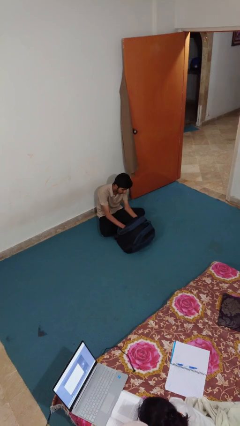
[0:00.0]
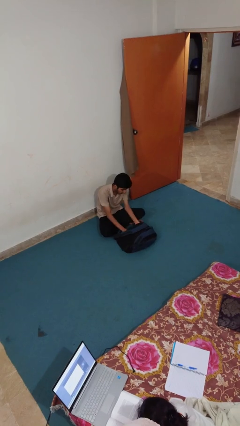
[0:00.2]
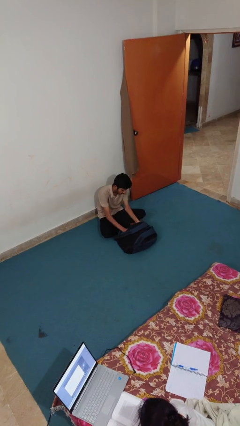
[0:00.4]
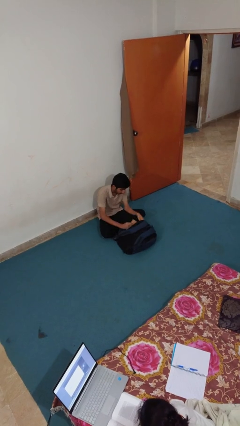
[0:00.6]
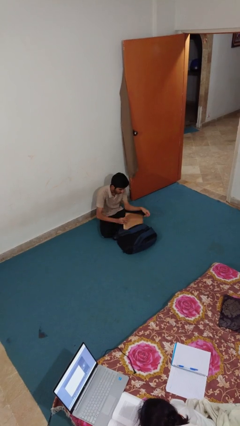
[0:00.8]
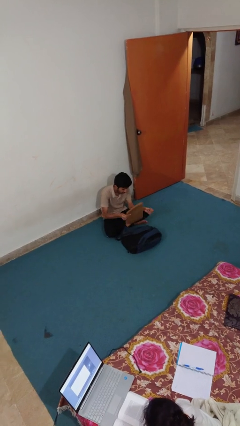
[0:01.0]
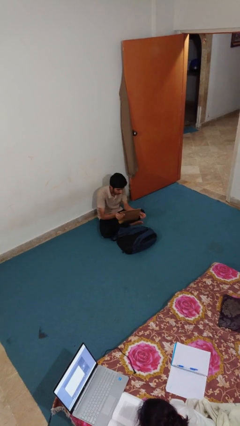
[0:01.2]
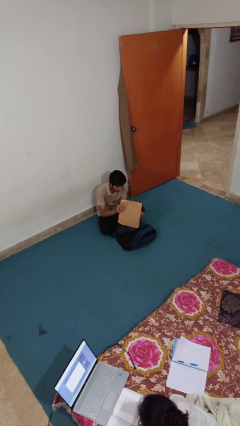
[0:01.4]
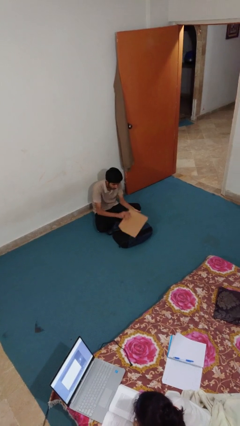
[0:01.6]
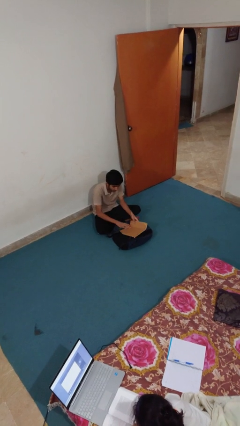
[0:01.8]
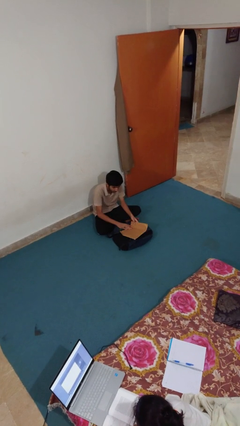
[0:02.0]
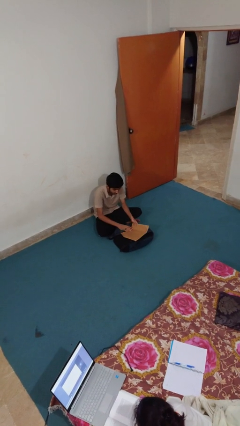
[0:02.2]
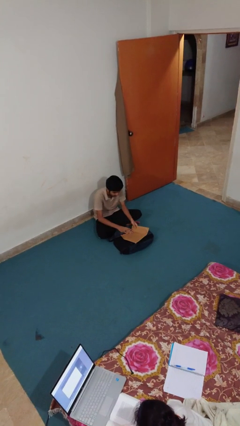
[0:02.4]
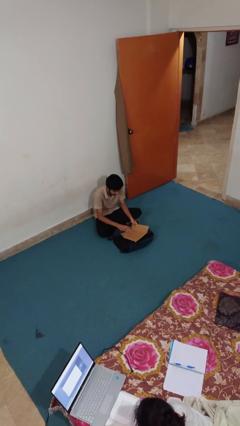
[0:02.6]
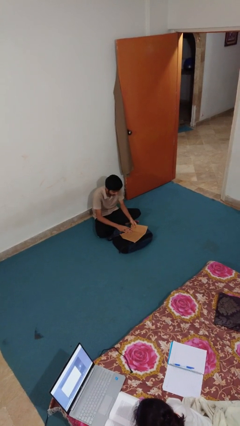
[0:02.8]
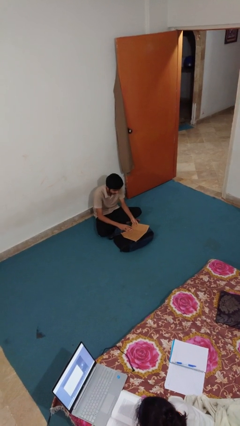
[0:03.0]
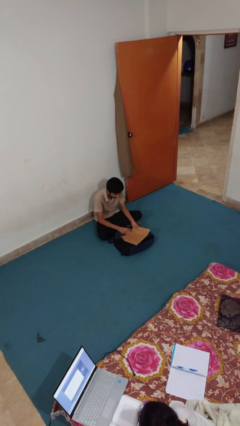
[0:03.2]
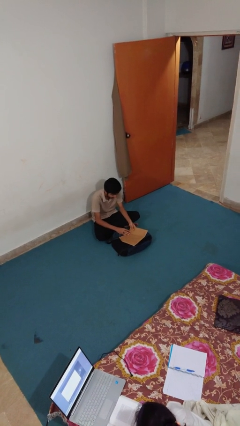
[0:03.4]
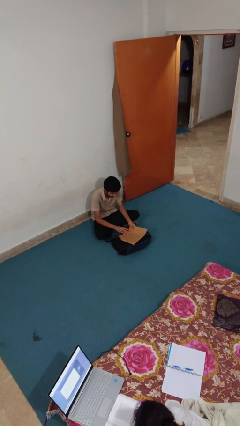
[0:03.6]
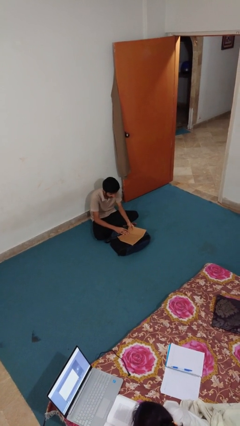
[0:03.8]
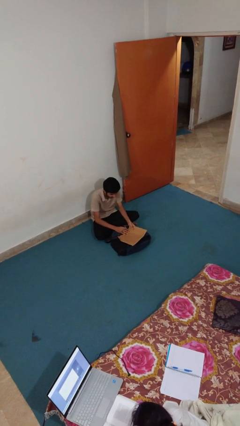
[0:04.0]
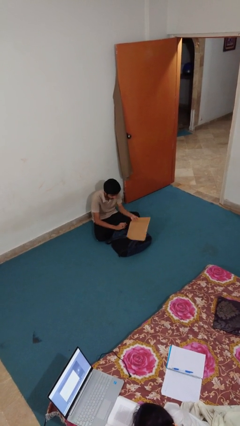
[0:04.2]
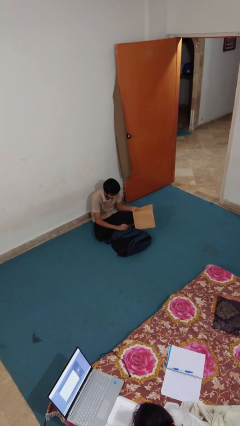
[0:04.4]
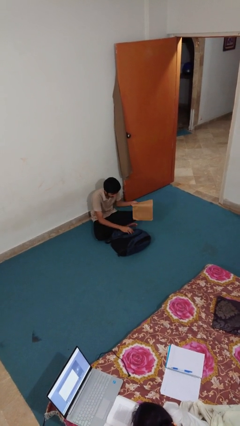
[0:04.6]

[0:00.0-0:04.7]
person sweeps floor

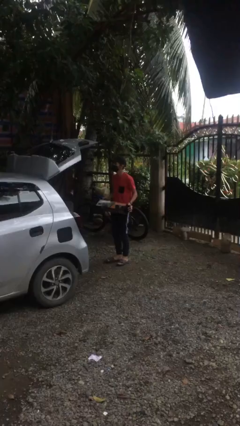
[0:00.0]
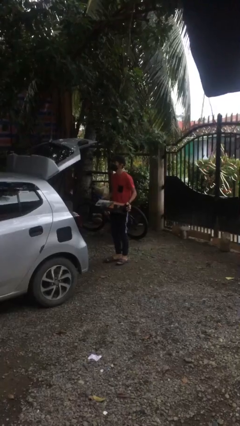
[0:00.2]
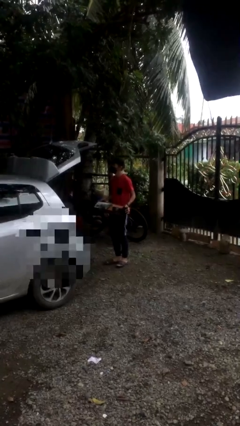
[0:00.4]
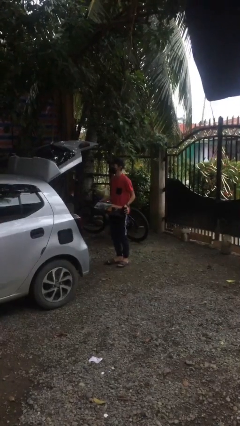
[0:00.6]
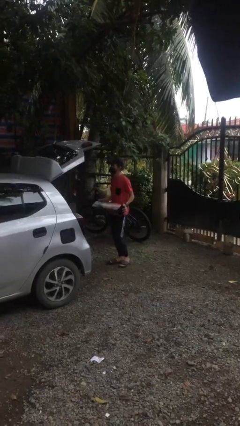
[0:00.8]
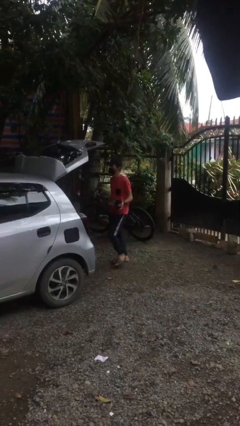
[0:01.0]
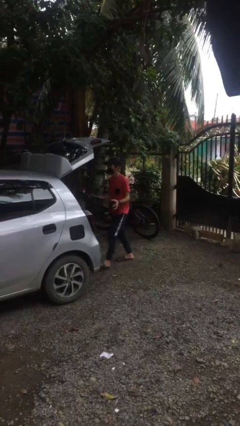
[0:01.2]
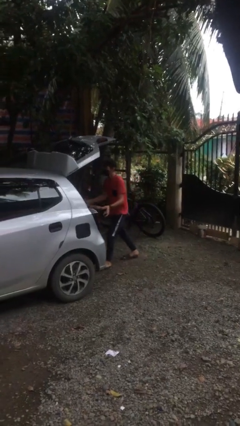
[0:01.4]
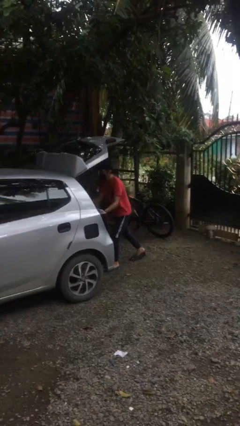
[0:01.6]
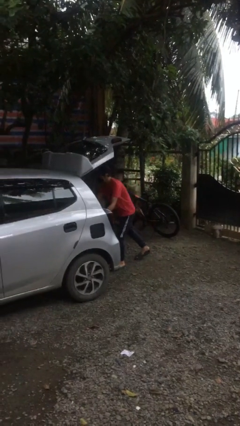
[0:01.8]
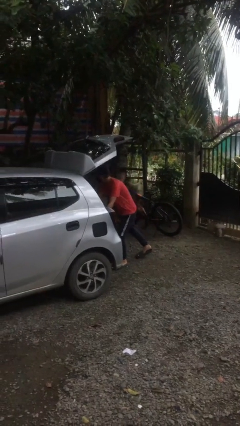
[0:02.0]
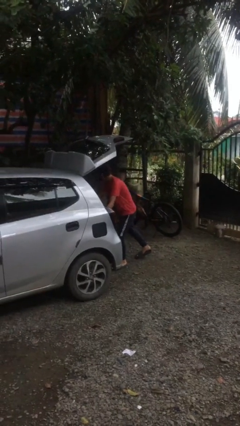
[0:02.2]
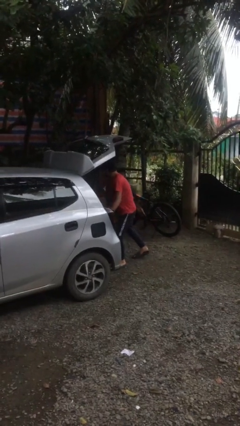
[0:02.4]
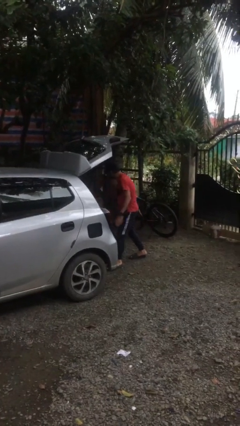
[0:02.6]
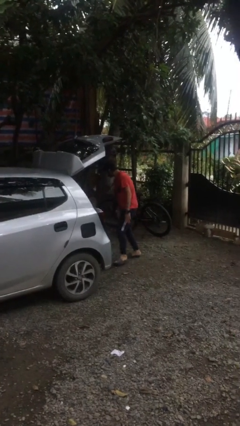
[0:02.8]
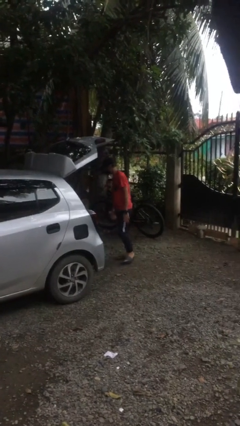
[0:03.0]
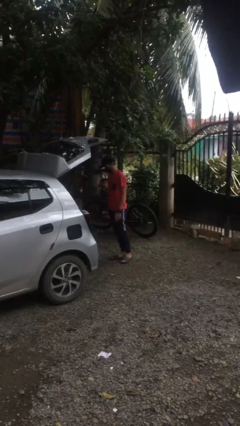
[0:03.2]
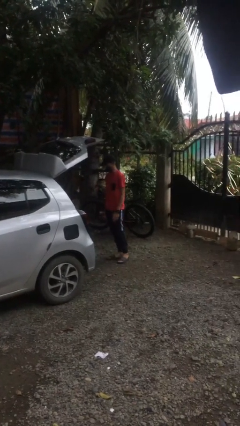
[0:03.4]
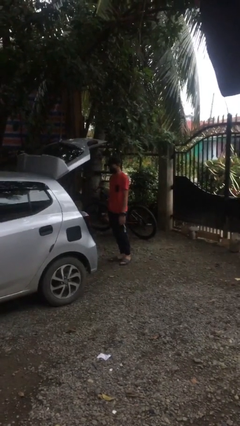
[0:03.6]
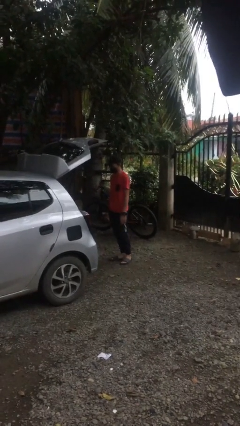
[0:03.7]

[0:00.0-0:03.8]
person loads car

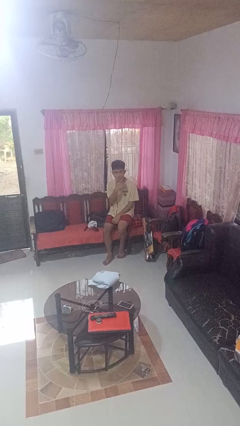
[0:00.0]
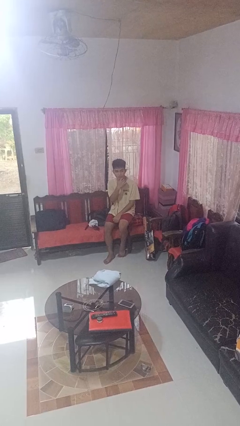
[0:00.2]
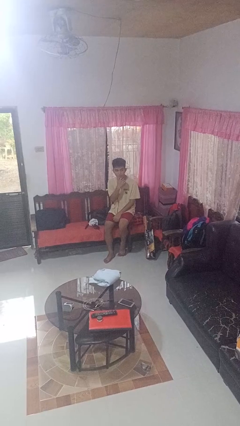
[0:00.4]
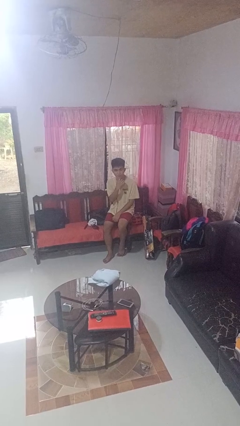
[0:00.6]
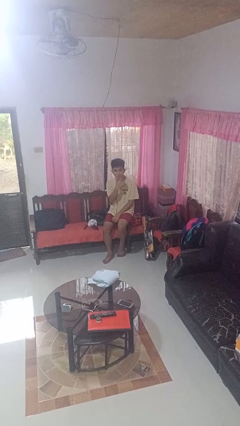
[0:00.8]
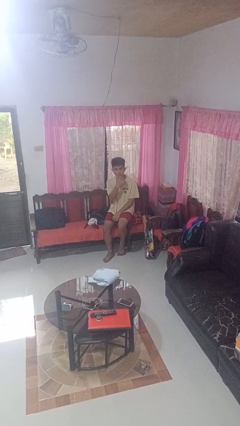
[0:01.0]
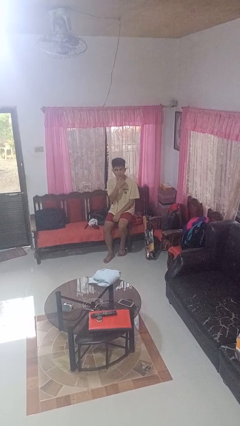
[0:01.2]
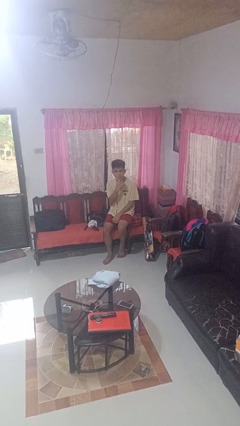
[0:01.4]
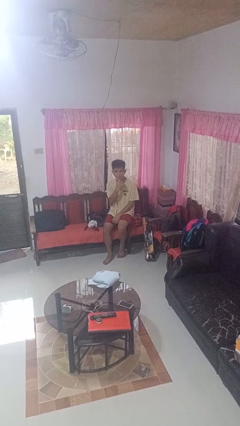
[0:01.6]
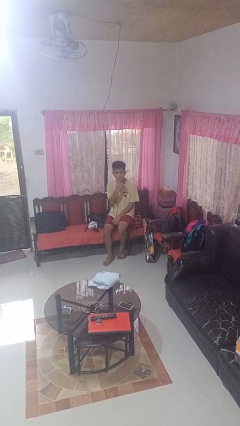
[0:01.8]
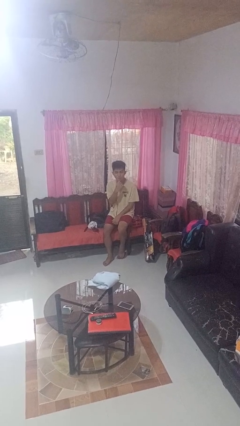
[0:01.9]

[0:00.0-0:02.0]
person strokes chin

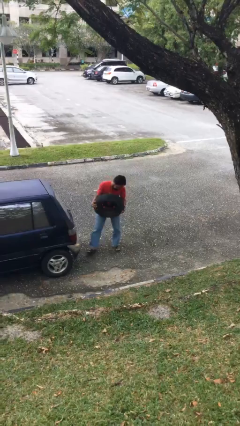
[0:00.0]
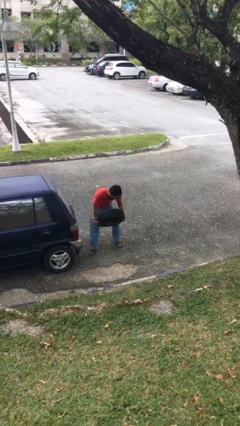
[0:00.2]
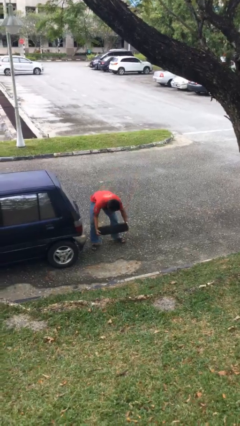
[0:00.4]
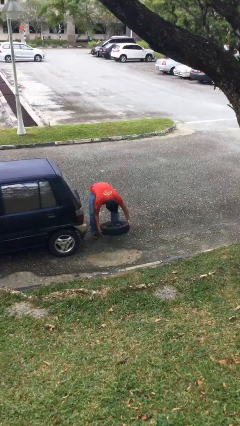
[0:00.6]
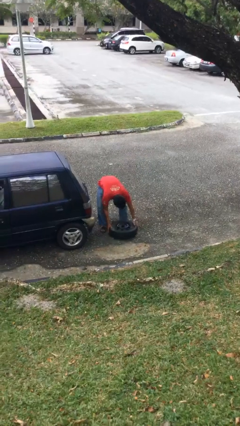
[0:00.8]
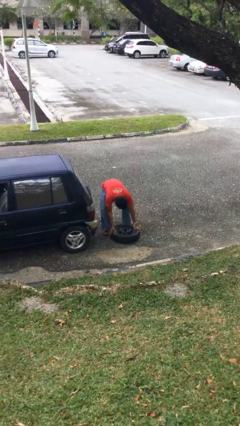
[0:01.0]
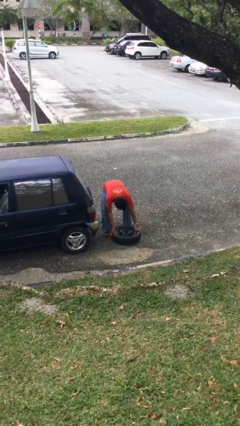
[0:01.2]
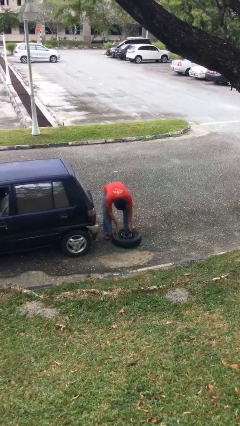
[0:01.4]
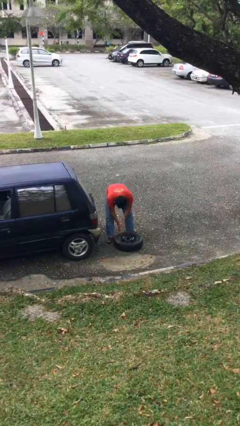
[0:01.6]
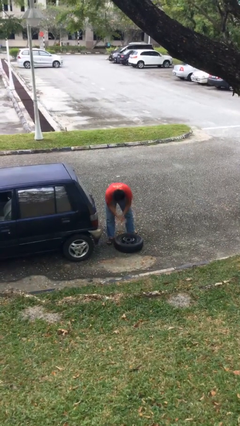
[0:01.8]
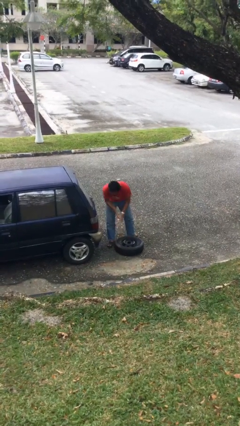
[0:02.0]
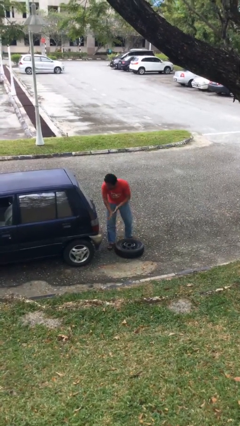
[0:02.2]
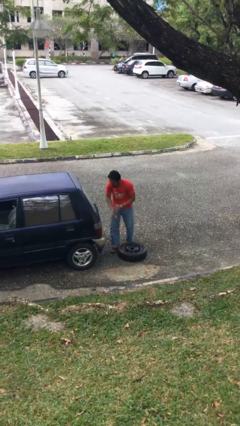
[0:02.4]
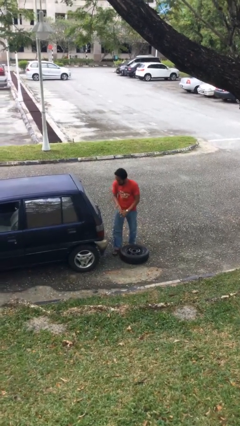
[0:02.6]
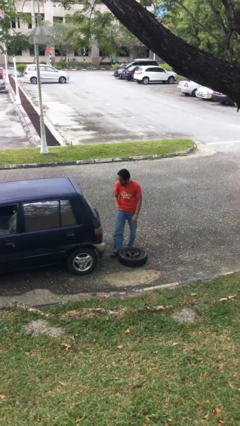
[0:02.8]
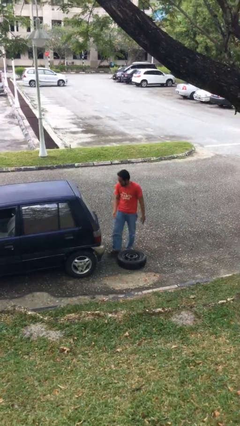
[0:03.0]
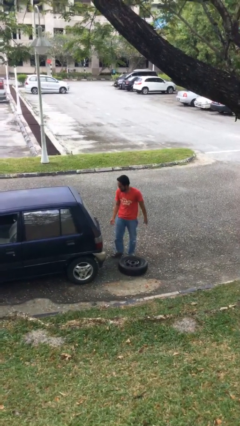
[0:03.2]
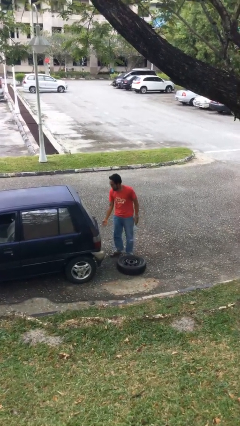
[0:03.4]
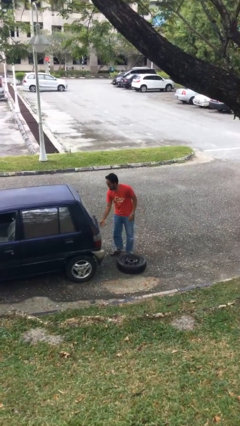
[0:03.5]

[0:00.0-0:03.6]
person puts down object on floor

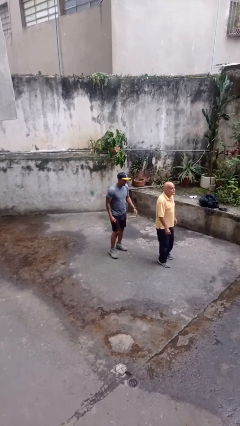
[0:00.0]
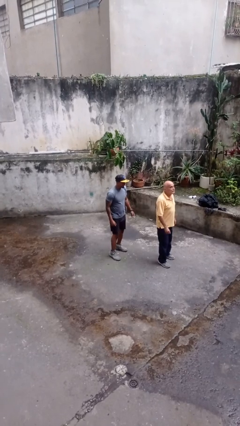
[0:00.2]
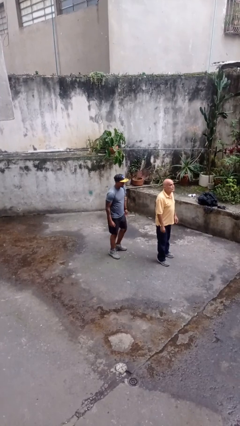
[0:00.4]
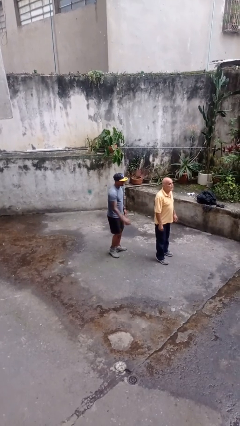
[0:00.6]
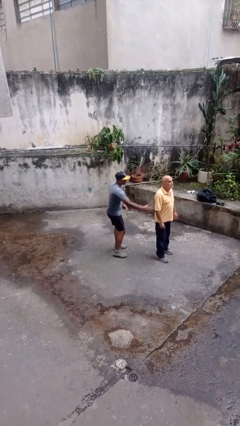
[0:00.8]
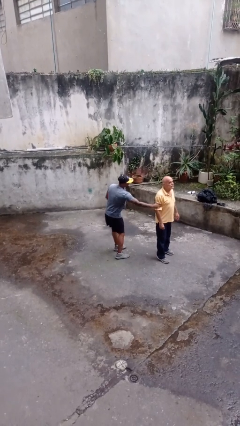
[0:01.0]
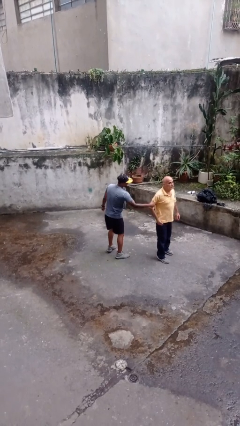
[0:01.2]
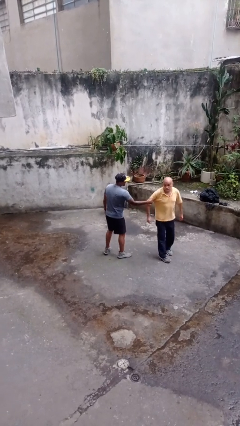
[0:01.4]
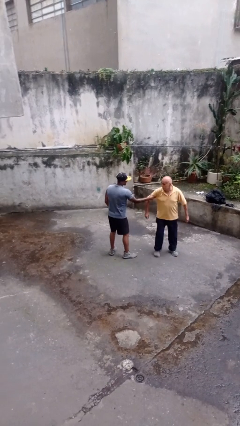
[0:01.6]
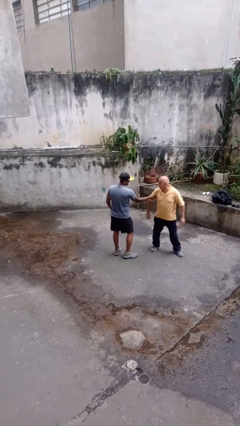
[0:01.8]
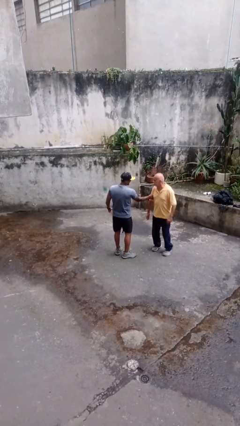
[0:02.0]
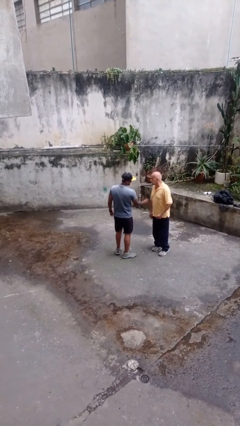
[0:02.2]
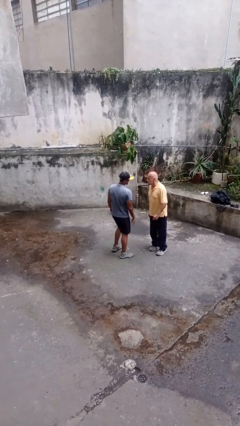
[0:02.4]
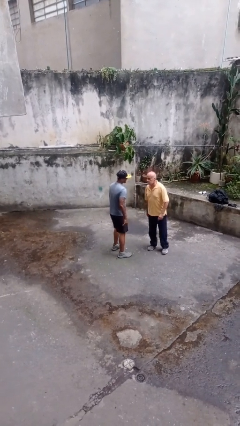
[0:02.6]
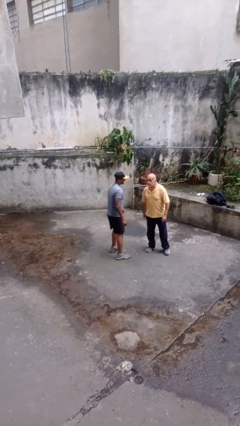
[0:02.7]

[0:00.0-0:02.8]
person grabs person by bicep

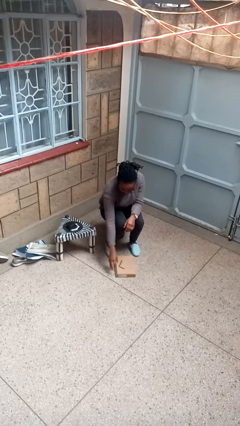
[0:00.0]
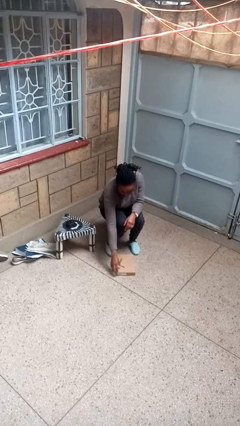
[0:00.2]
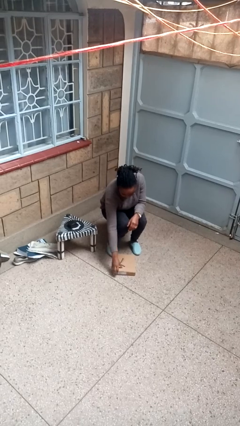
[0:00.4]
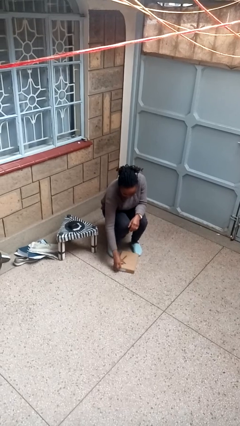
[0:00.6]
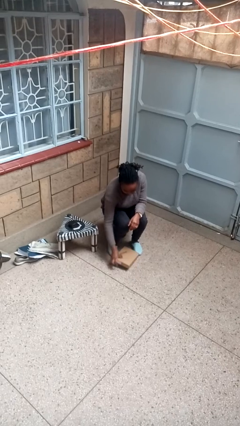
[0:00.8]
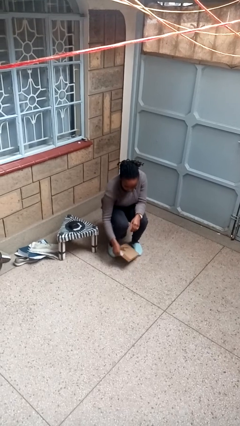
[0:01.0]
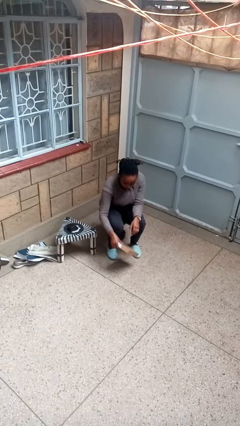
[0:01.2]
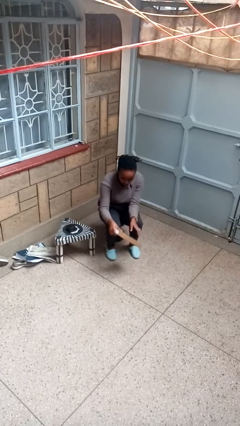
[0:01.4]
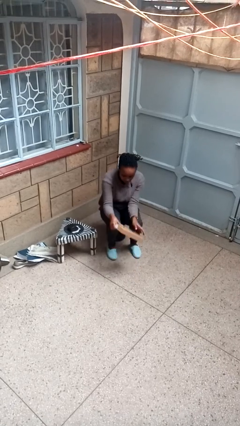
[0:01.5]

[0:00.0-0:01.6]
person picks up object from floor
